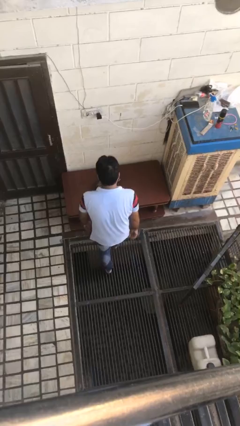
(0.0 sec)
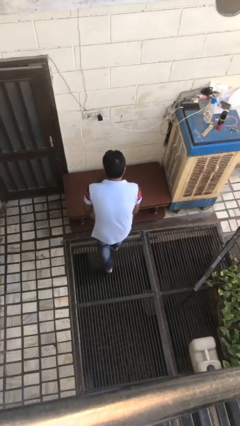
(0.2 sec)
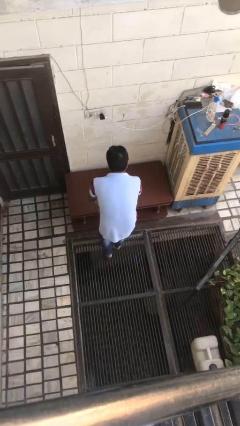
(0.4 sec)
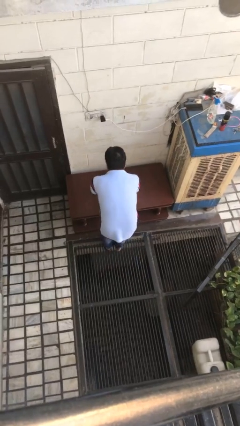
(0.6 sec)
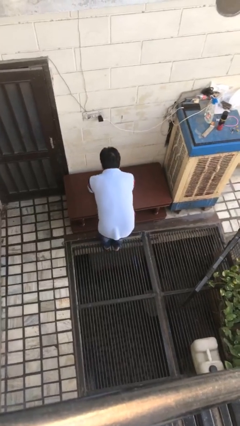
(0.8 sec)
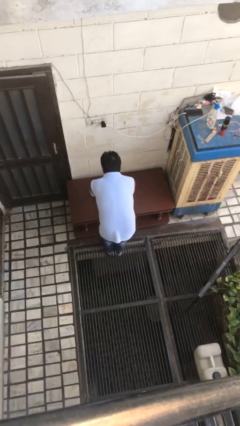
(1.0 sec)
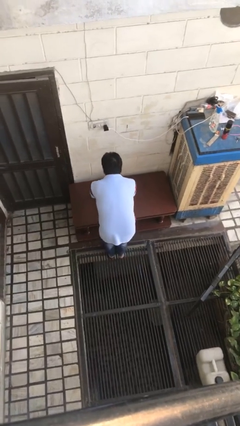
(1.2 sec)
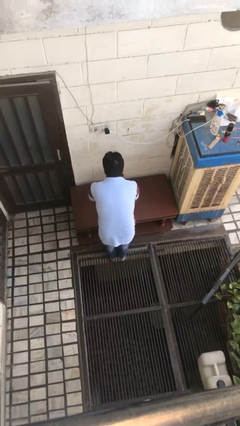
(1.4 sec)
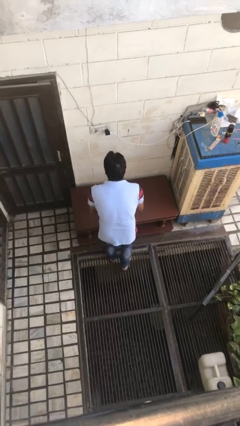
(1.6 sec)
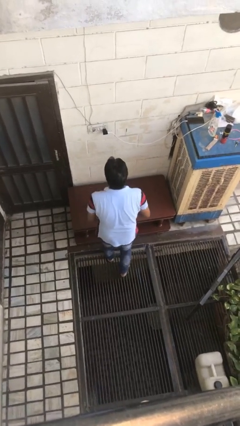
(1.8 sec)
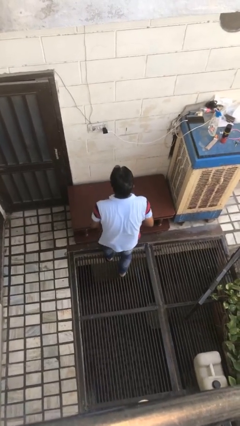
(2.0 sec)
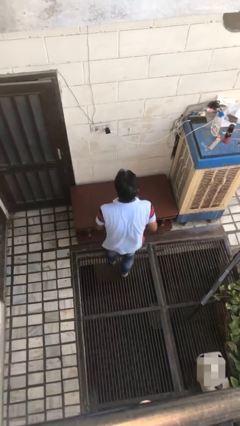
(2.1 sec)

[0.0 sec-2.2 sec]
person picks up object from table

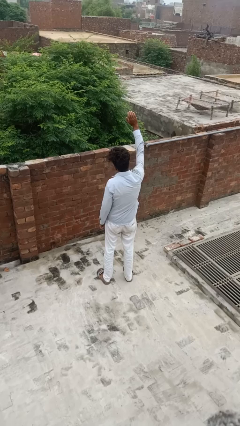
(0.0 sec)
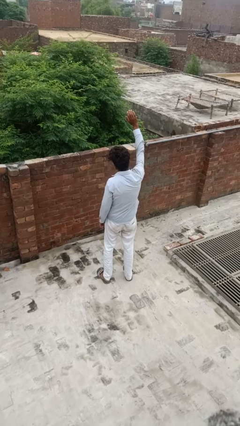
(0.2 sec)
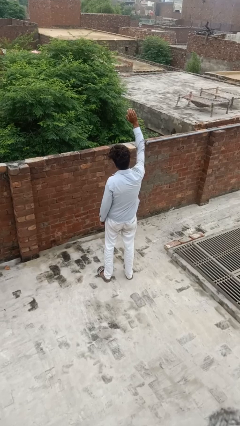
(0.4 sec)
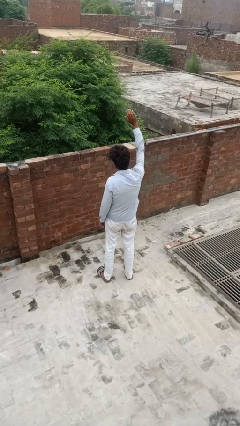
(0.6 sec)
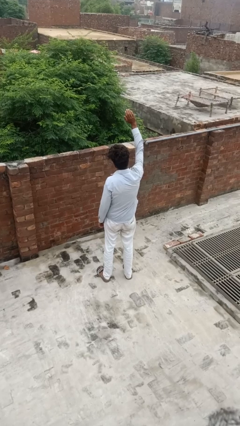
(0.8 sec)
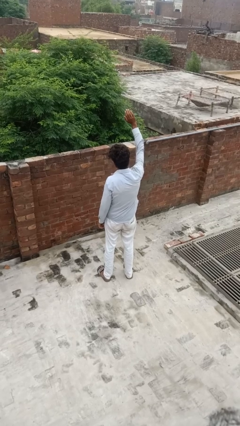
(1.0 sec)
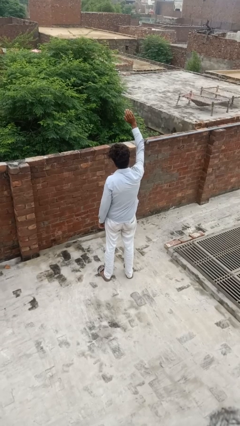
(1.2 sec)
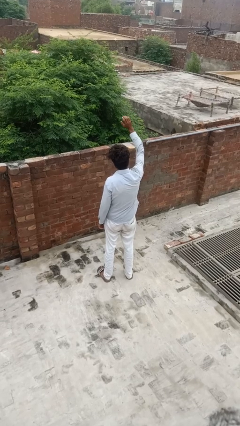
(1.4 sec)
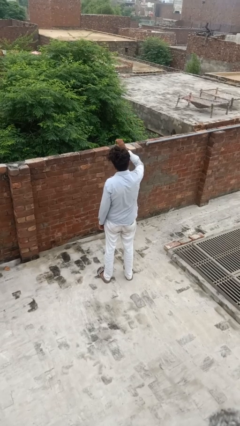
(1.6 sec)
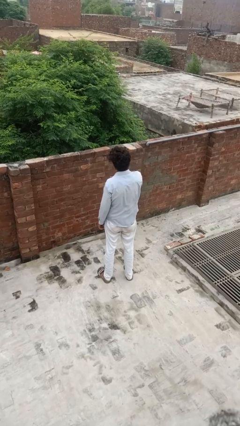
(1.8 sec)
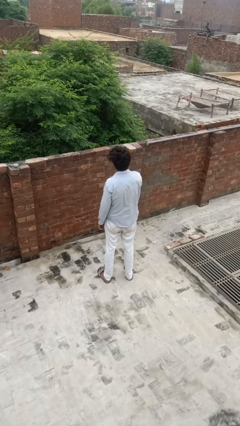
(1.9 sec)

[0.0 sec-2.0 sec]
person gestures raise hand

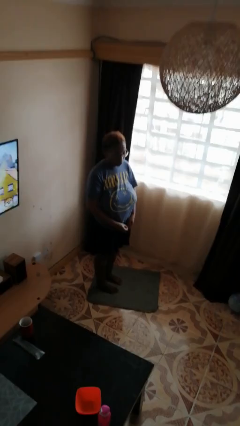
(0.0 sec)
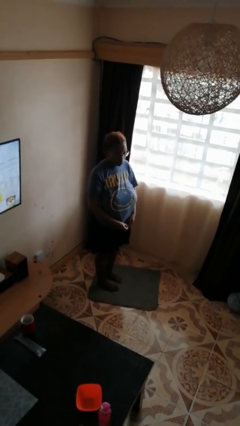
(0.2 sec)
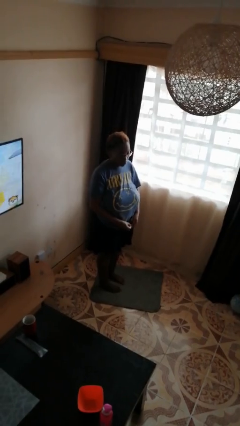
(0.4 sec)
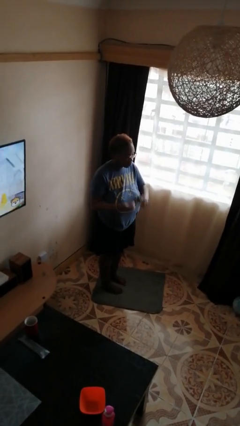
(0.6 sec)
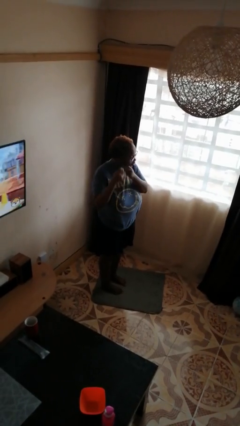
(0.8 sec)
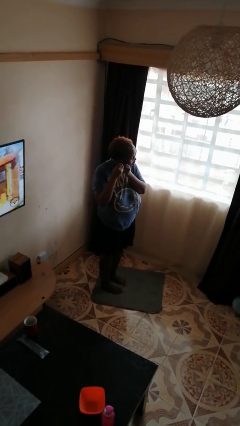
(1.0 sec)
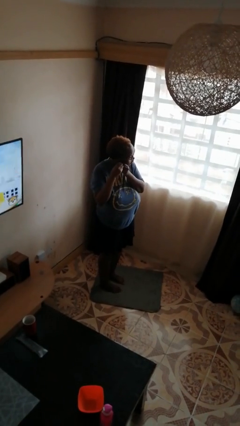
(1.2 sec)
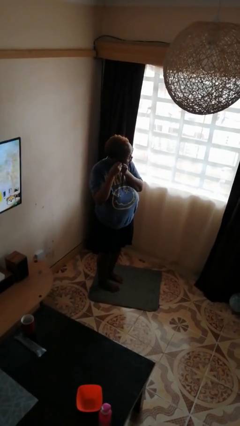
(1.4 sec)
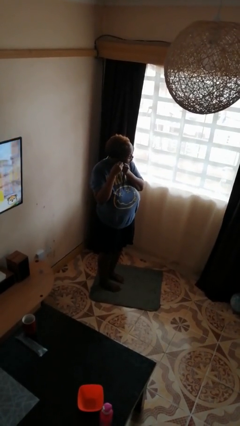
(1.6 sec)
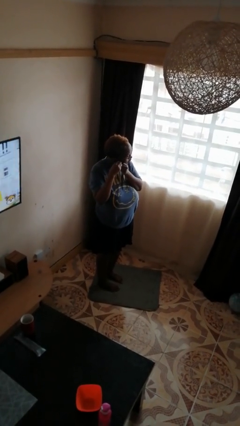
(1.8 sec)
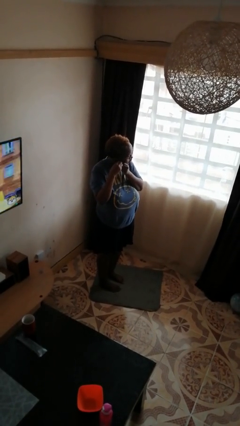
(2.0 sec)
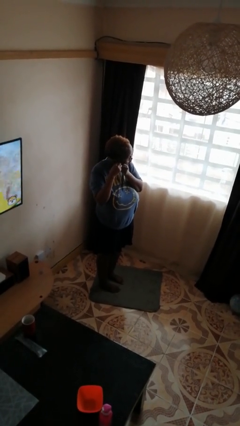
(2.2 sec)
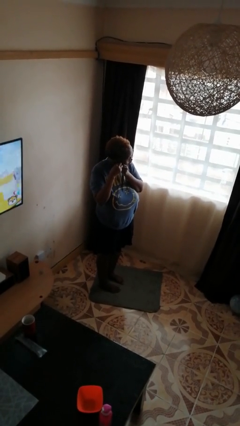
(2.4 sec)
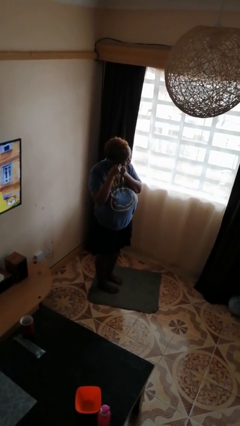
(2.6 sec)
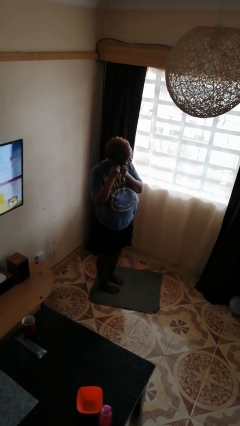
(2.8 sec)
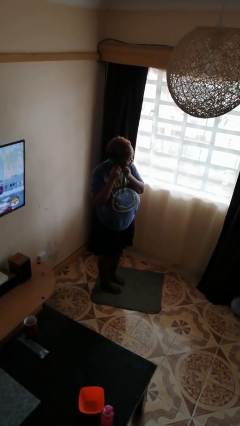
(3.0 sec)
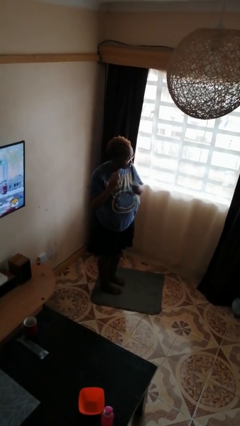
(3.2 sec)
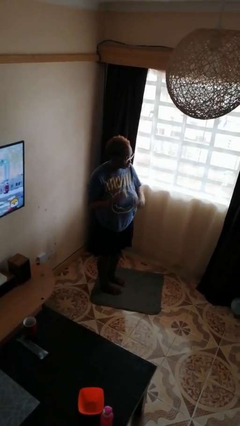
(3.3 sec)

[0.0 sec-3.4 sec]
person puts on earrings

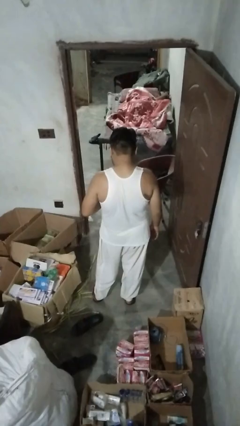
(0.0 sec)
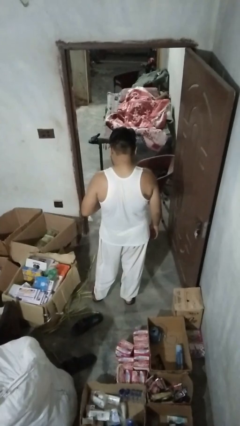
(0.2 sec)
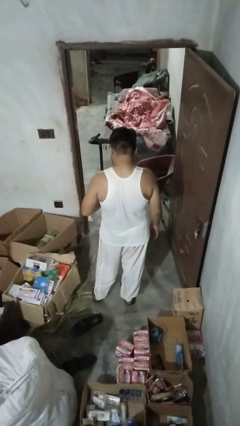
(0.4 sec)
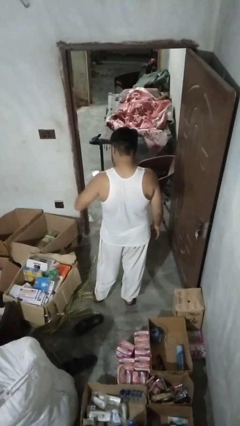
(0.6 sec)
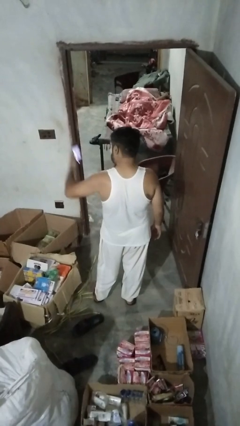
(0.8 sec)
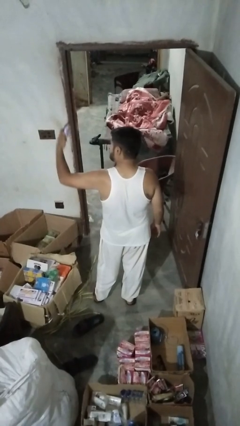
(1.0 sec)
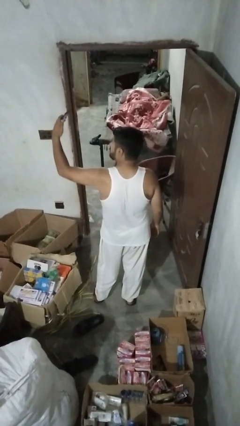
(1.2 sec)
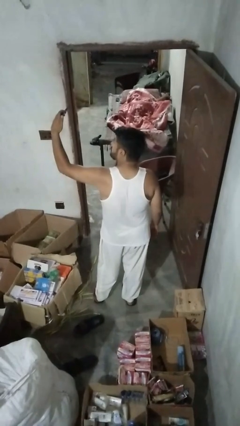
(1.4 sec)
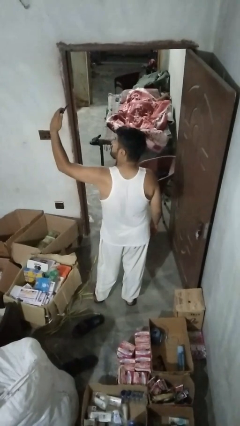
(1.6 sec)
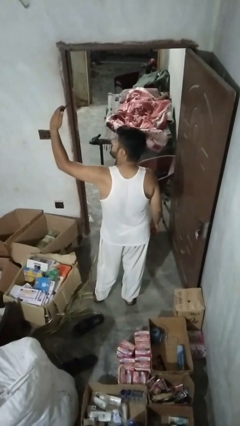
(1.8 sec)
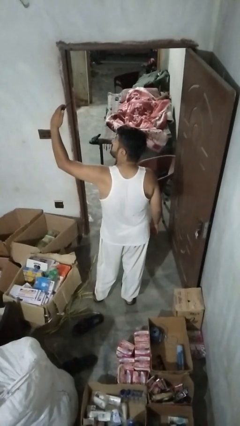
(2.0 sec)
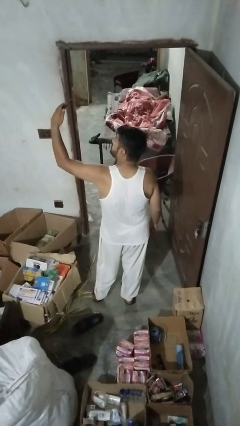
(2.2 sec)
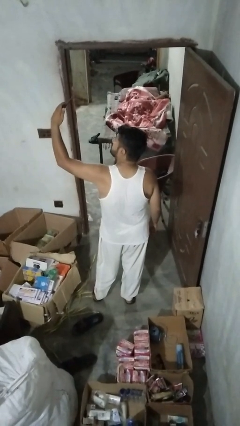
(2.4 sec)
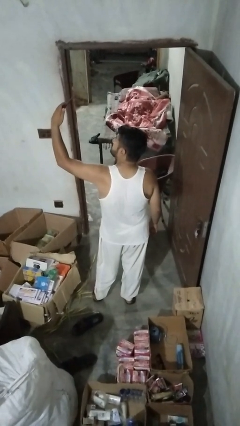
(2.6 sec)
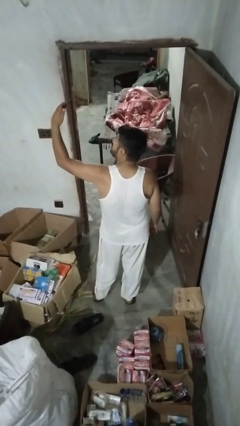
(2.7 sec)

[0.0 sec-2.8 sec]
person takes selfie

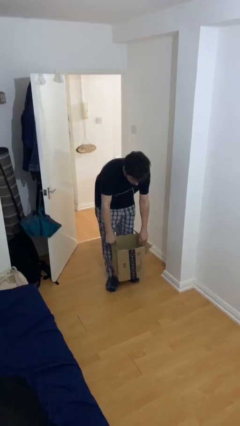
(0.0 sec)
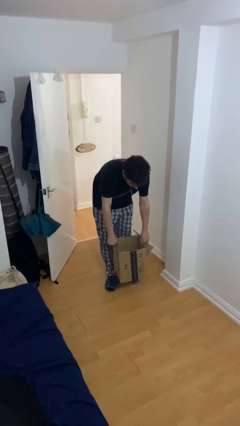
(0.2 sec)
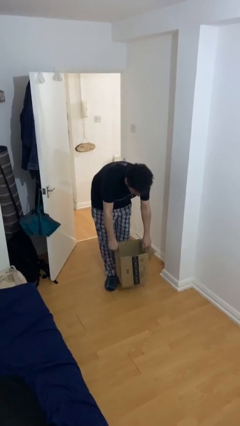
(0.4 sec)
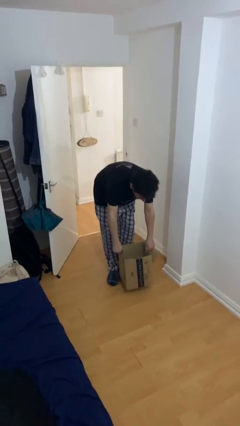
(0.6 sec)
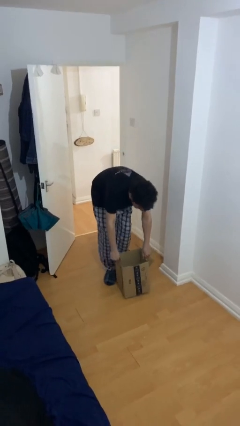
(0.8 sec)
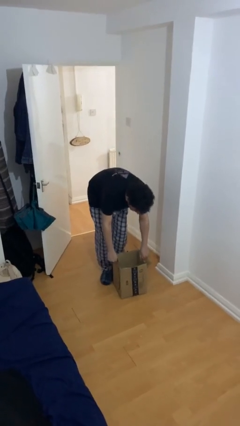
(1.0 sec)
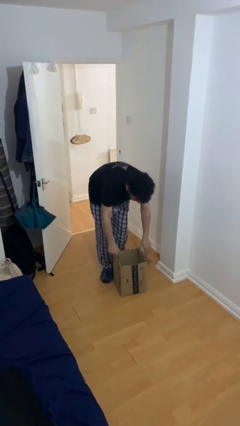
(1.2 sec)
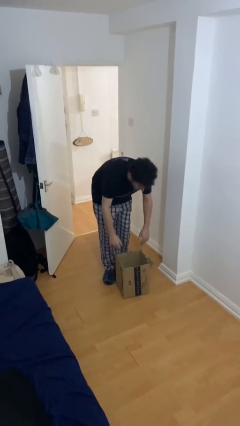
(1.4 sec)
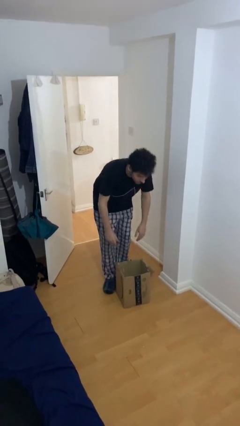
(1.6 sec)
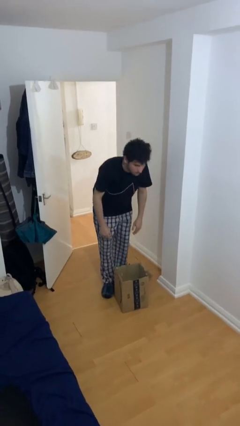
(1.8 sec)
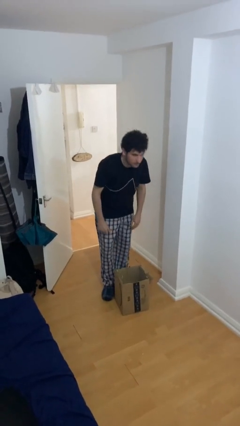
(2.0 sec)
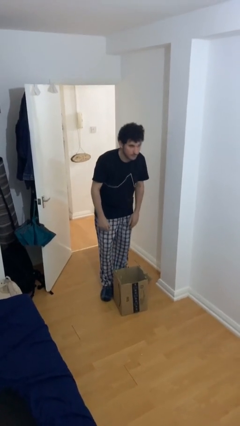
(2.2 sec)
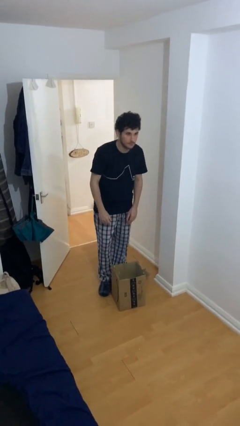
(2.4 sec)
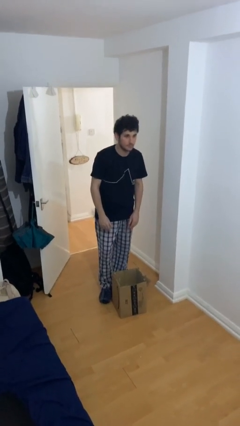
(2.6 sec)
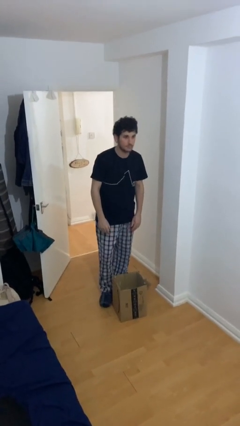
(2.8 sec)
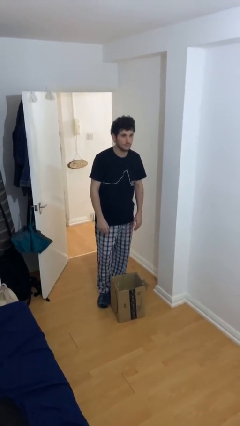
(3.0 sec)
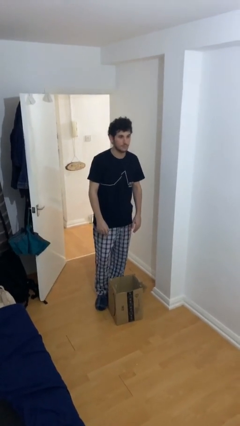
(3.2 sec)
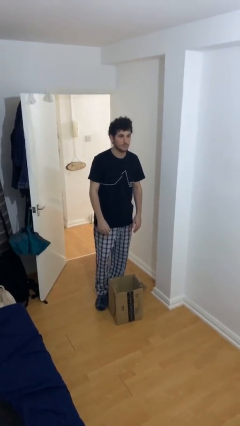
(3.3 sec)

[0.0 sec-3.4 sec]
person puts down object on floor

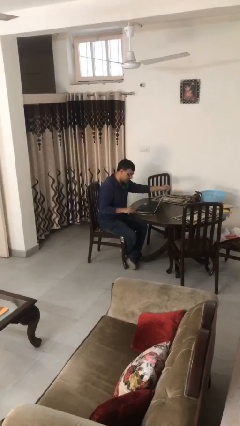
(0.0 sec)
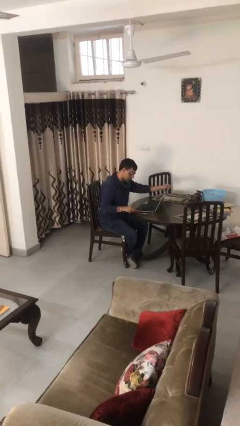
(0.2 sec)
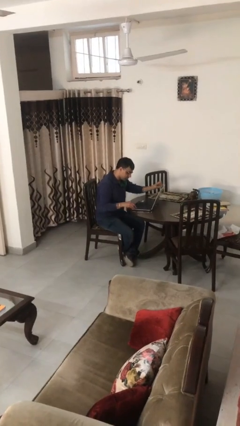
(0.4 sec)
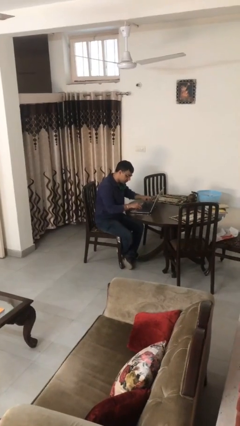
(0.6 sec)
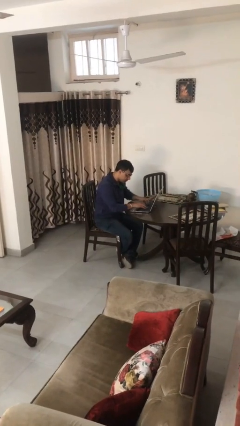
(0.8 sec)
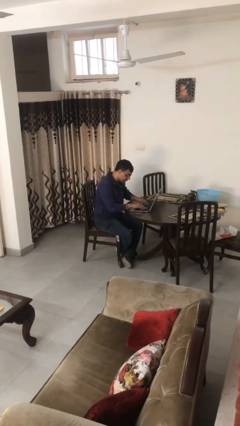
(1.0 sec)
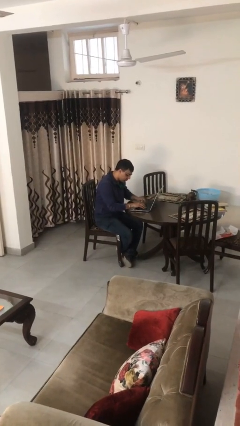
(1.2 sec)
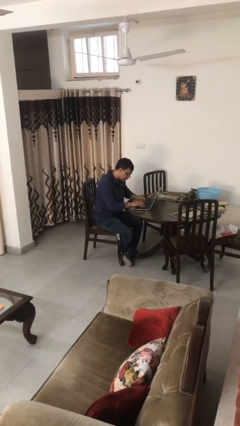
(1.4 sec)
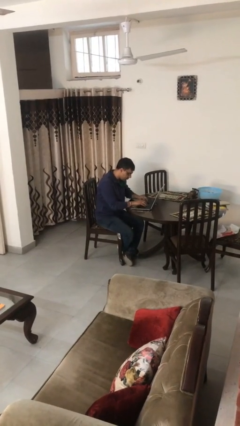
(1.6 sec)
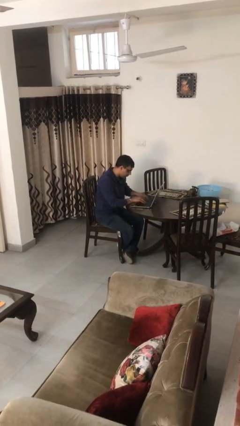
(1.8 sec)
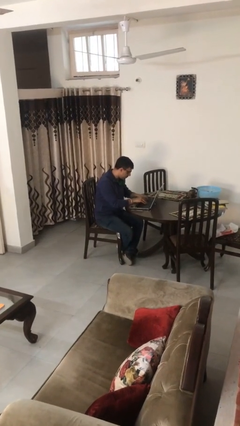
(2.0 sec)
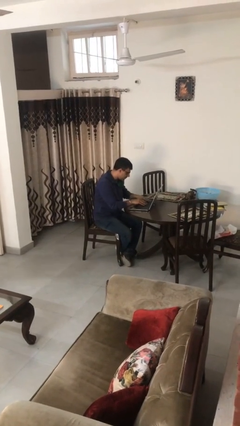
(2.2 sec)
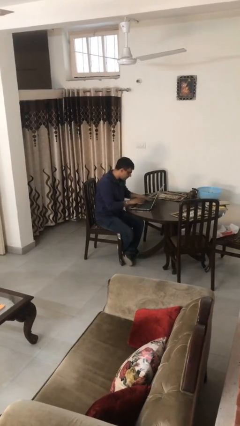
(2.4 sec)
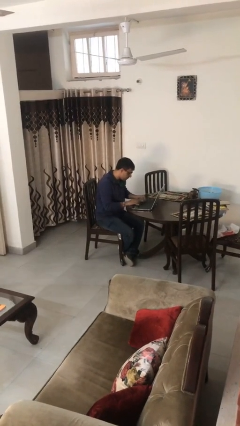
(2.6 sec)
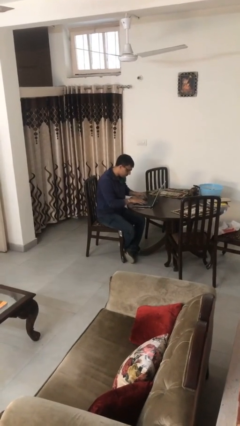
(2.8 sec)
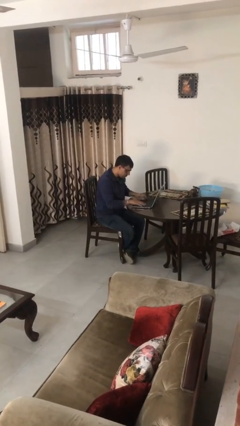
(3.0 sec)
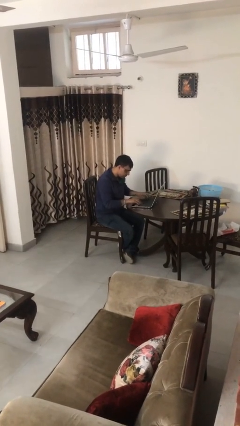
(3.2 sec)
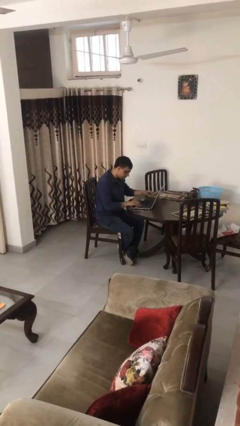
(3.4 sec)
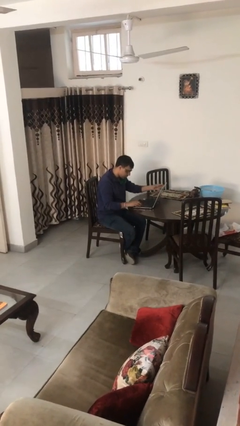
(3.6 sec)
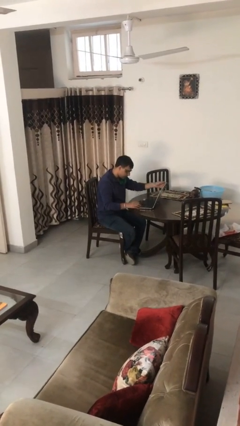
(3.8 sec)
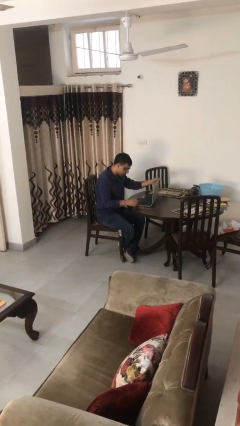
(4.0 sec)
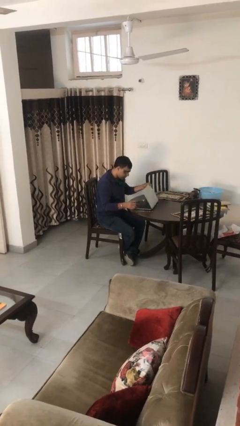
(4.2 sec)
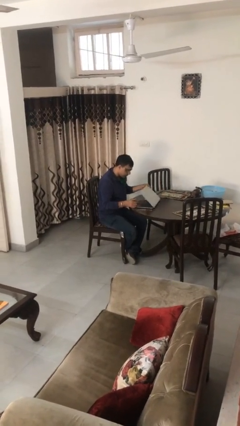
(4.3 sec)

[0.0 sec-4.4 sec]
person interacts with laptop
